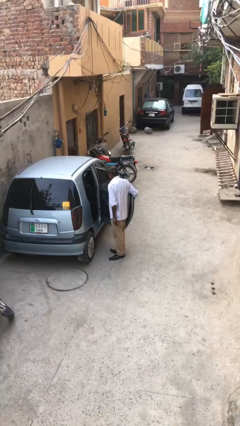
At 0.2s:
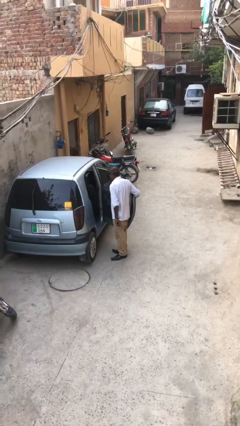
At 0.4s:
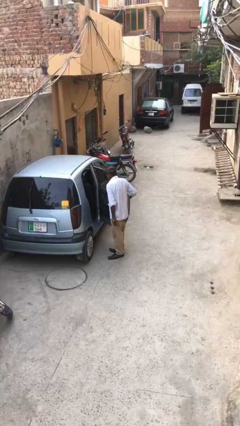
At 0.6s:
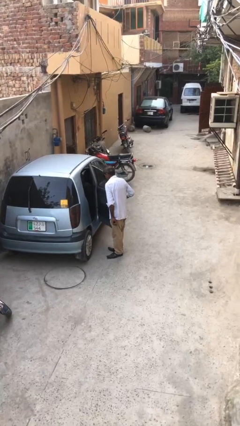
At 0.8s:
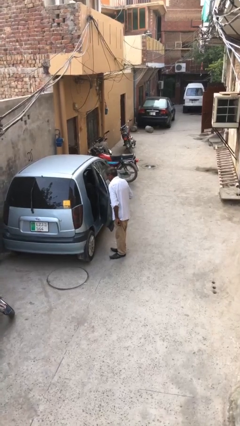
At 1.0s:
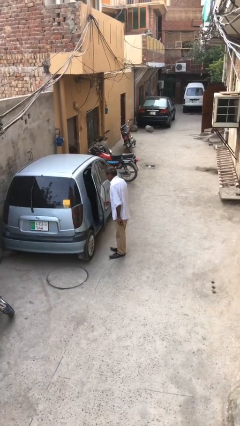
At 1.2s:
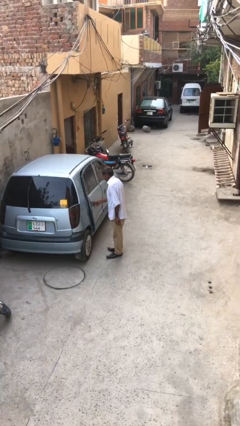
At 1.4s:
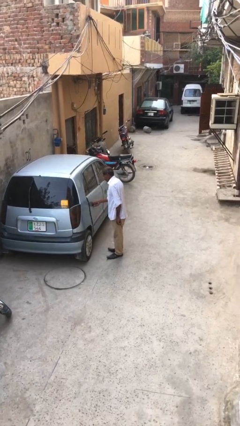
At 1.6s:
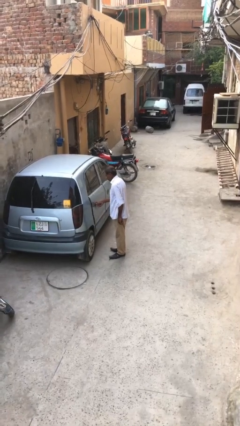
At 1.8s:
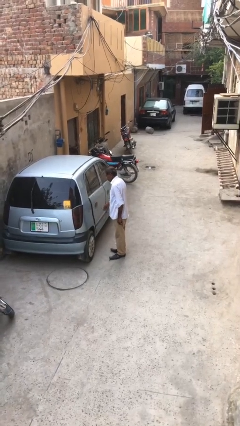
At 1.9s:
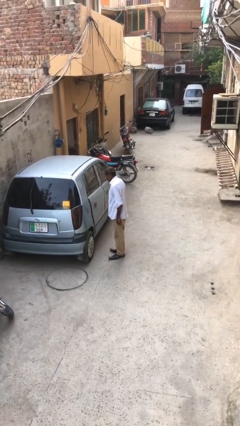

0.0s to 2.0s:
person closes car door

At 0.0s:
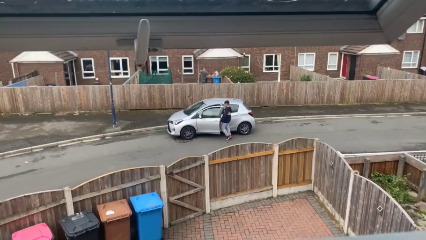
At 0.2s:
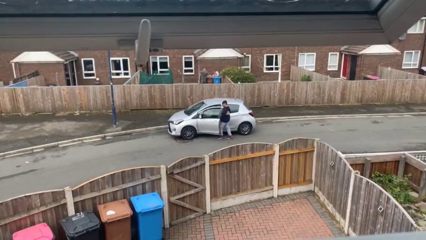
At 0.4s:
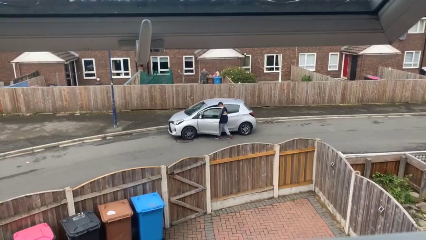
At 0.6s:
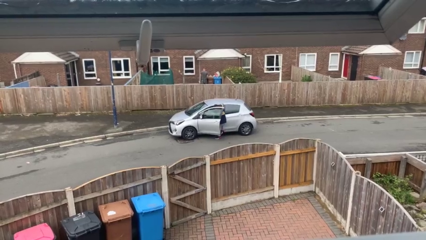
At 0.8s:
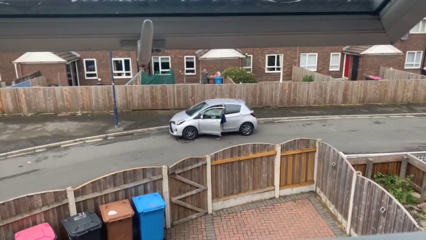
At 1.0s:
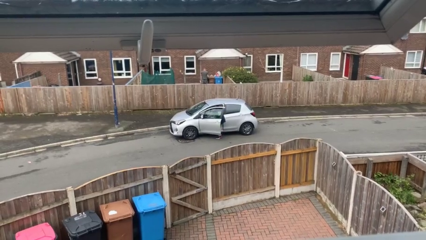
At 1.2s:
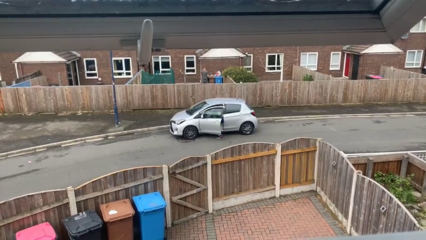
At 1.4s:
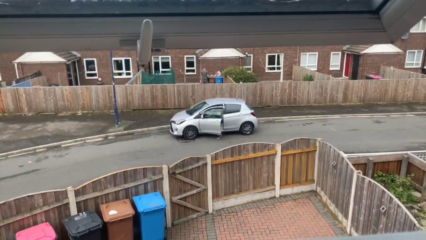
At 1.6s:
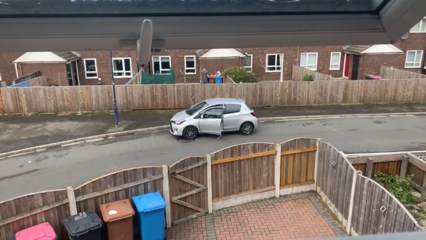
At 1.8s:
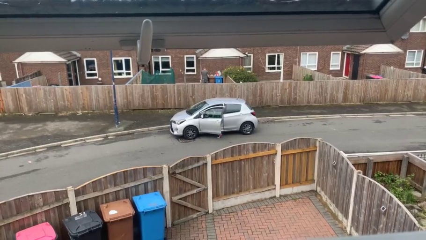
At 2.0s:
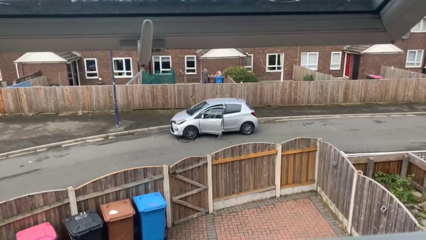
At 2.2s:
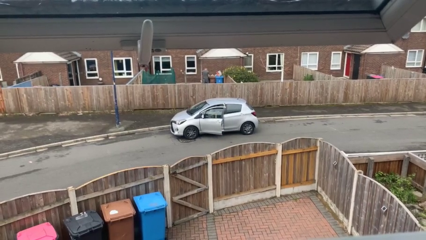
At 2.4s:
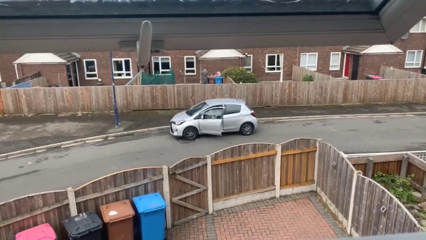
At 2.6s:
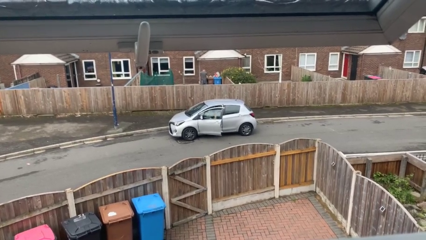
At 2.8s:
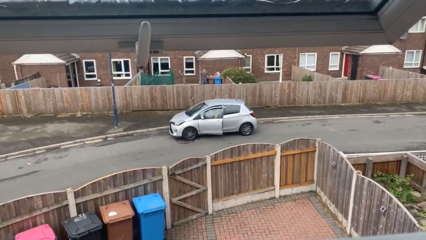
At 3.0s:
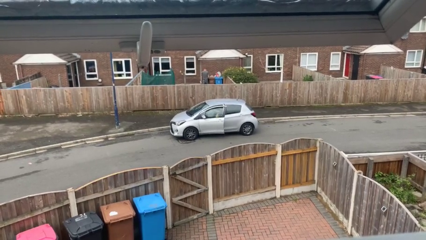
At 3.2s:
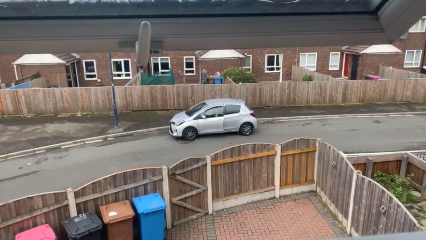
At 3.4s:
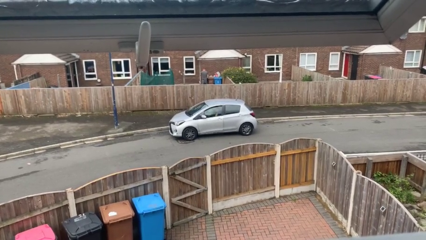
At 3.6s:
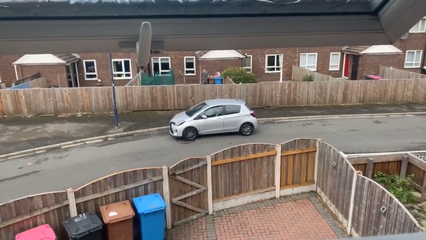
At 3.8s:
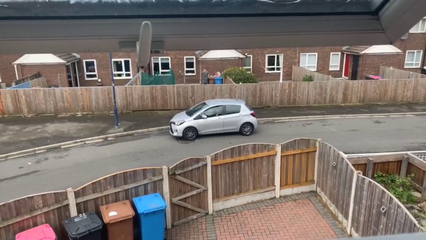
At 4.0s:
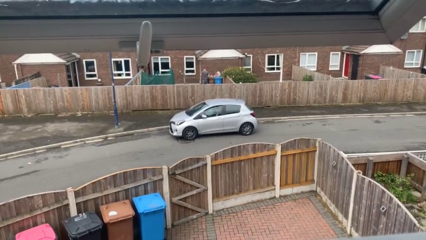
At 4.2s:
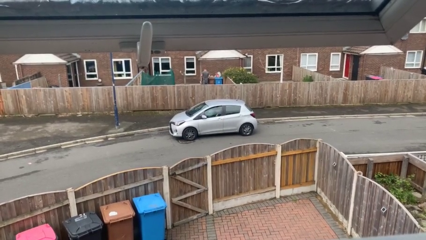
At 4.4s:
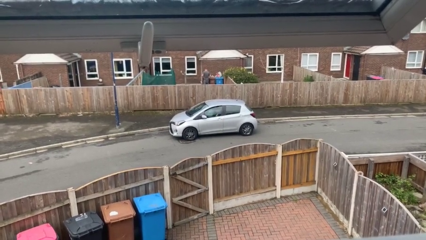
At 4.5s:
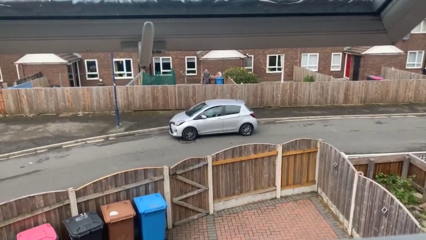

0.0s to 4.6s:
car picks up person

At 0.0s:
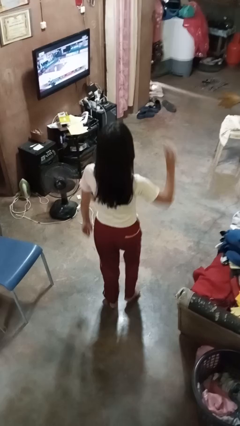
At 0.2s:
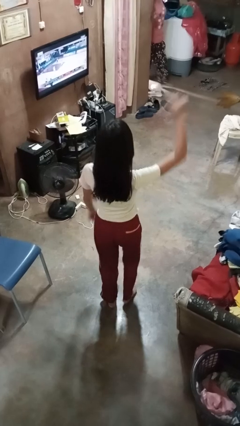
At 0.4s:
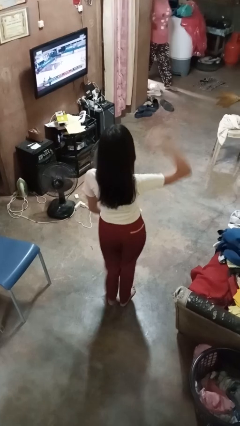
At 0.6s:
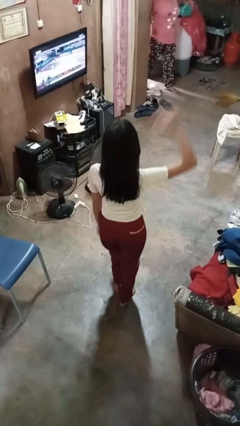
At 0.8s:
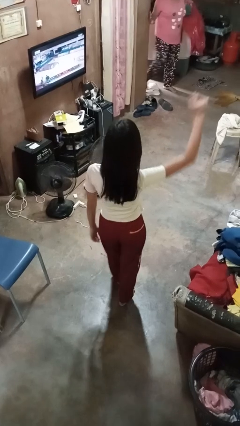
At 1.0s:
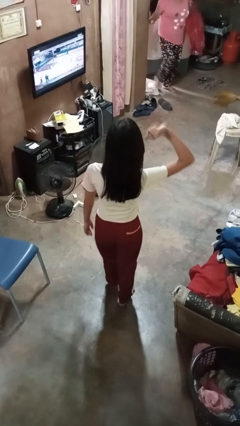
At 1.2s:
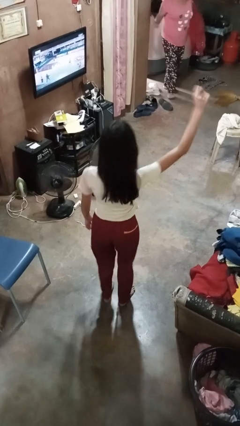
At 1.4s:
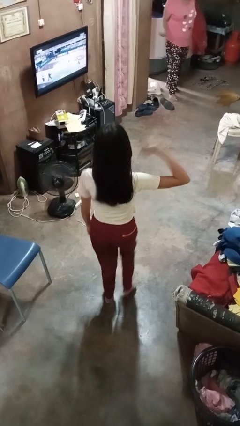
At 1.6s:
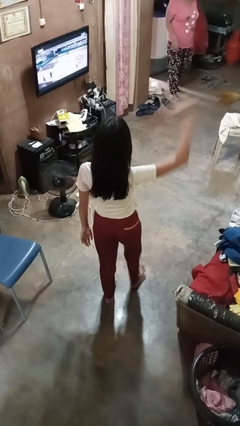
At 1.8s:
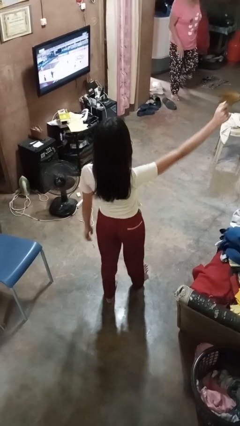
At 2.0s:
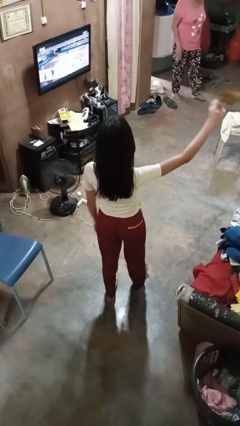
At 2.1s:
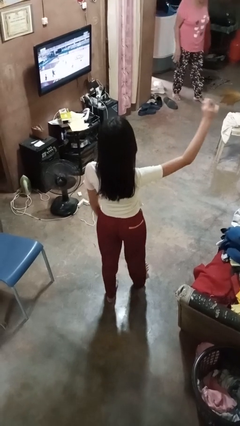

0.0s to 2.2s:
person dances in place

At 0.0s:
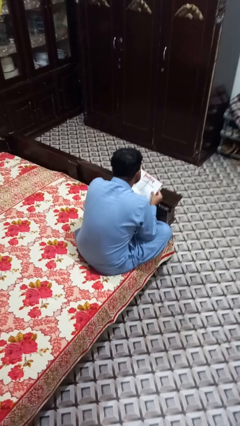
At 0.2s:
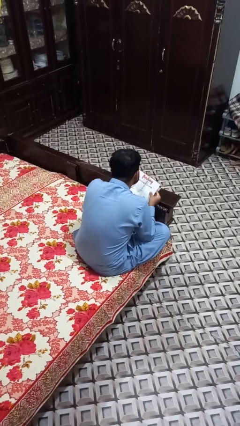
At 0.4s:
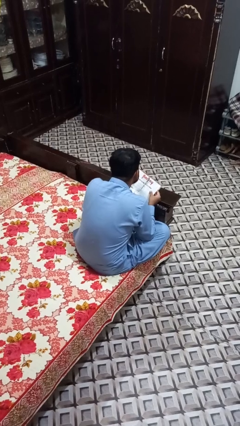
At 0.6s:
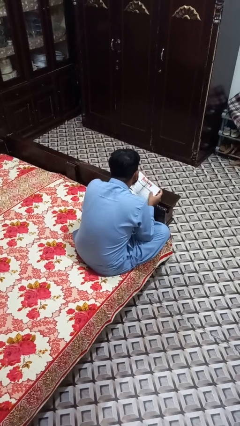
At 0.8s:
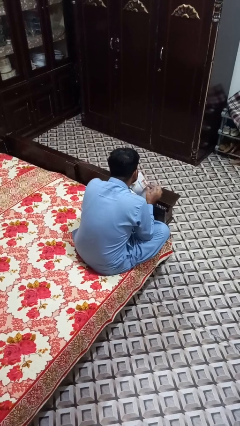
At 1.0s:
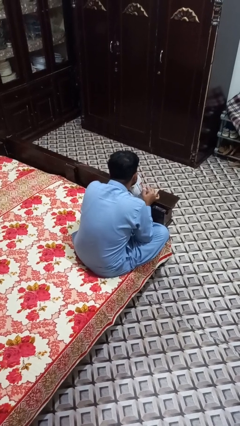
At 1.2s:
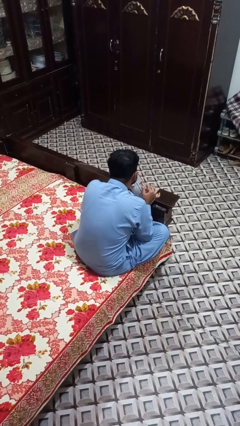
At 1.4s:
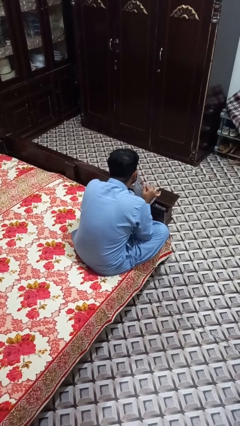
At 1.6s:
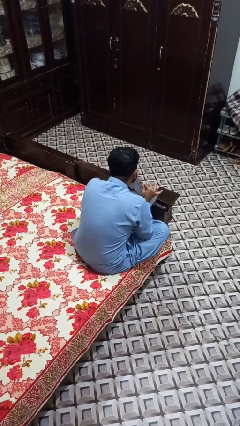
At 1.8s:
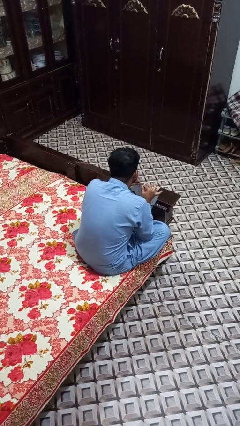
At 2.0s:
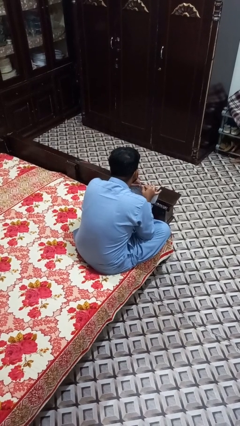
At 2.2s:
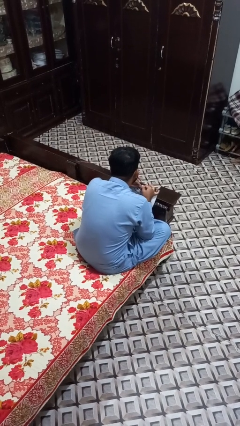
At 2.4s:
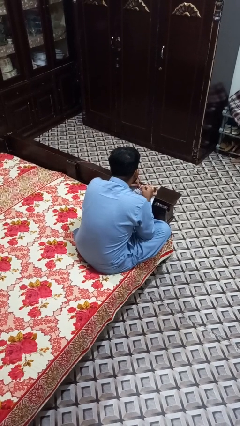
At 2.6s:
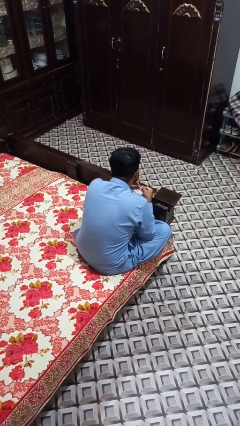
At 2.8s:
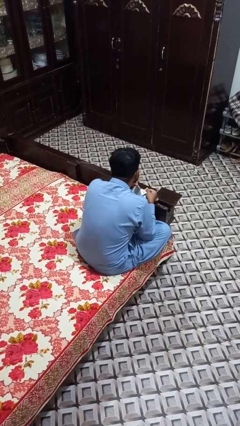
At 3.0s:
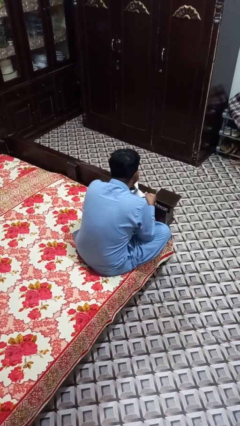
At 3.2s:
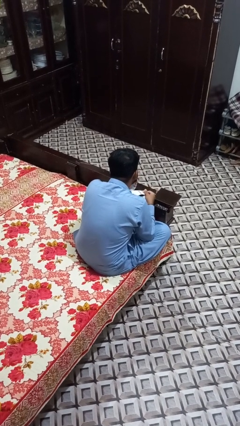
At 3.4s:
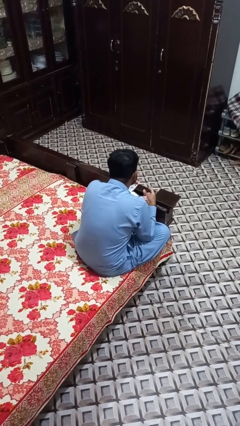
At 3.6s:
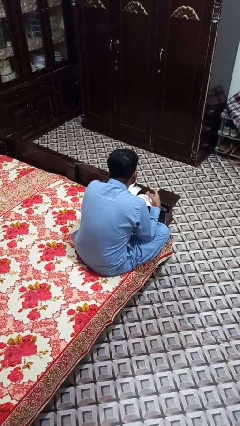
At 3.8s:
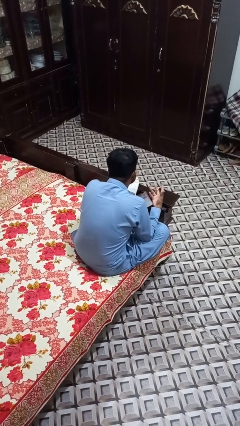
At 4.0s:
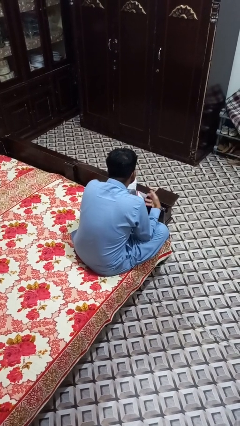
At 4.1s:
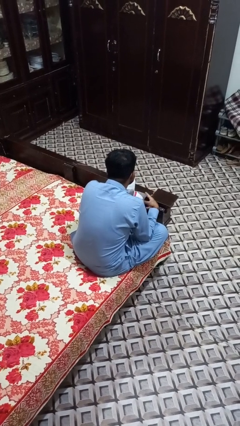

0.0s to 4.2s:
person tears paper

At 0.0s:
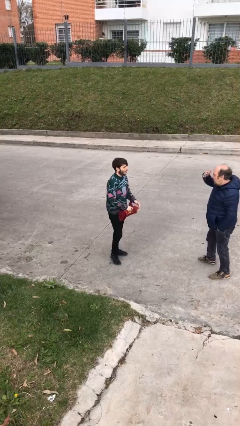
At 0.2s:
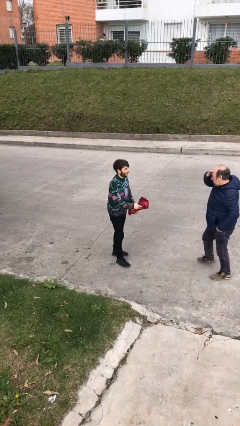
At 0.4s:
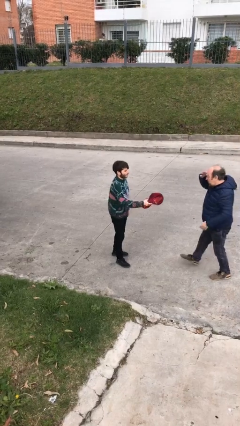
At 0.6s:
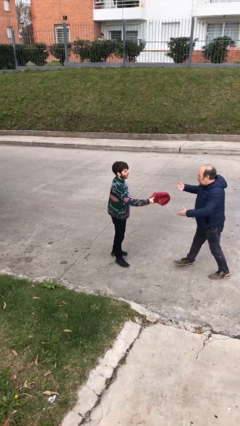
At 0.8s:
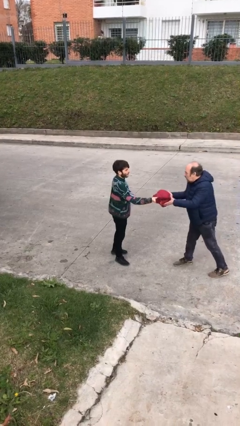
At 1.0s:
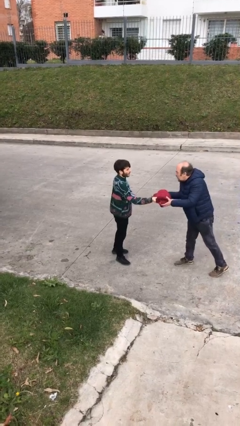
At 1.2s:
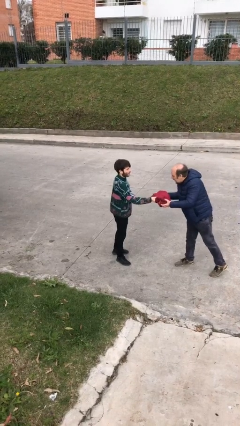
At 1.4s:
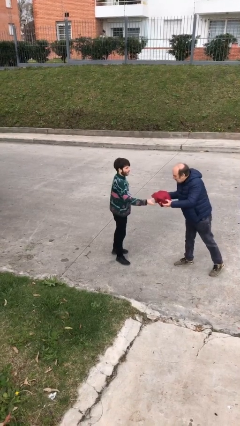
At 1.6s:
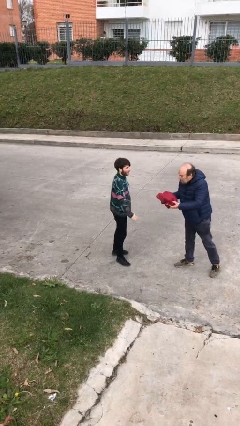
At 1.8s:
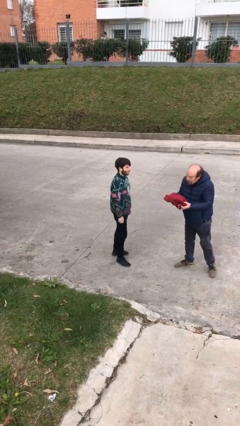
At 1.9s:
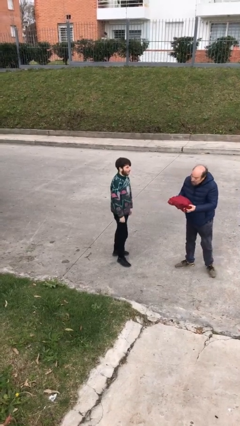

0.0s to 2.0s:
person transfers object to person

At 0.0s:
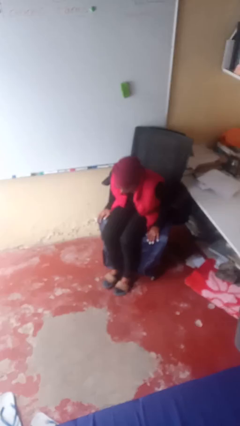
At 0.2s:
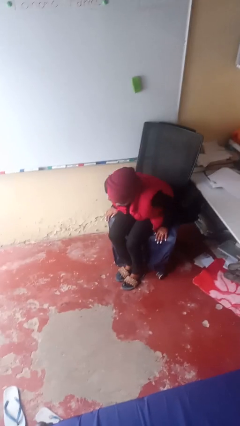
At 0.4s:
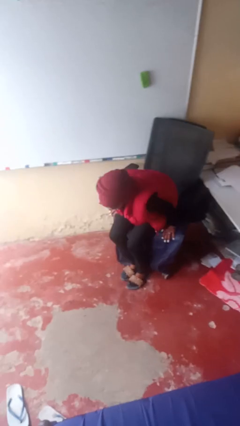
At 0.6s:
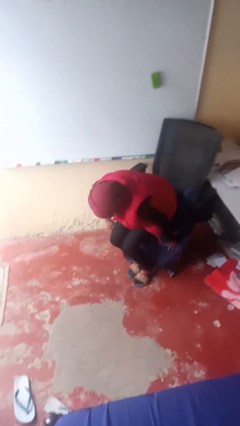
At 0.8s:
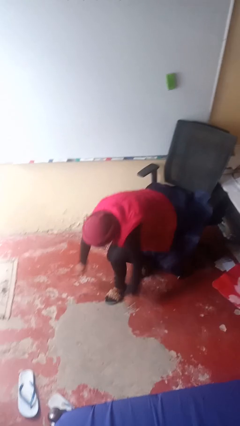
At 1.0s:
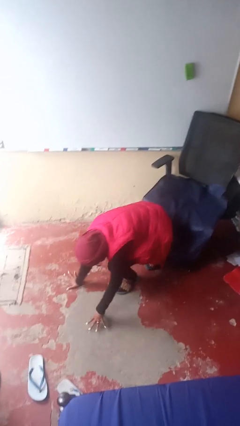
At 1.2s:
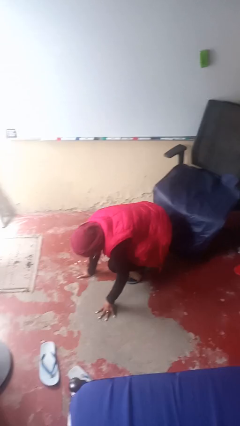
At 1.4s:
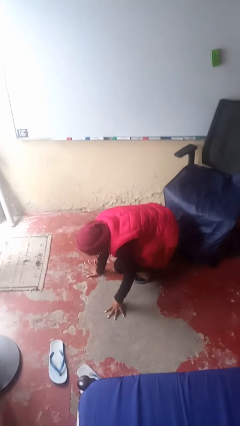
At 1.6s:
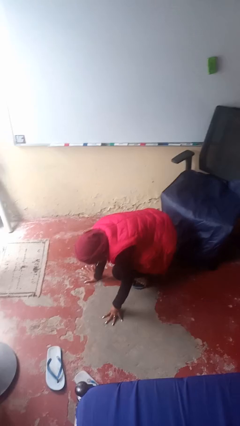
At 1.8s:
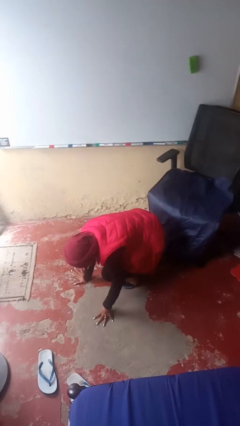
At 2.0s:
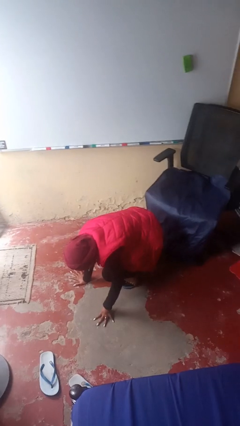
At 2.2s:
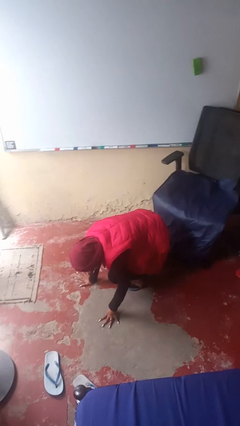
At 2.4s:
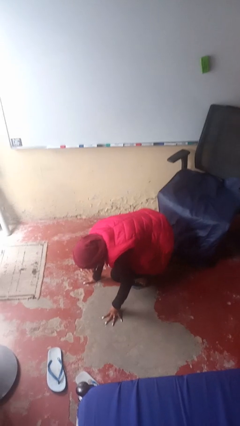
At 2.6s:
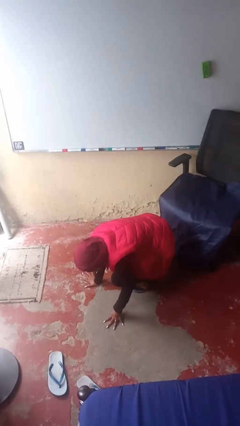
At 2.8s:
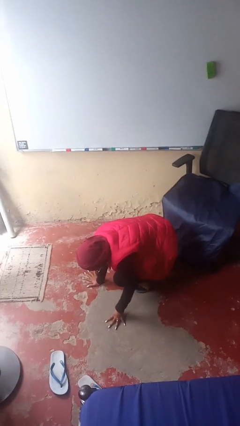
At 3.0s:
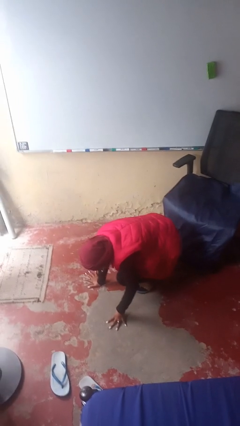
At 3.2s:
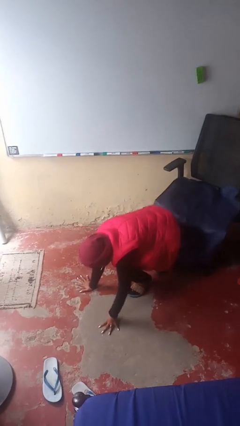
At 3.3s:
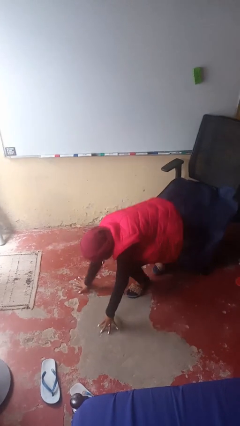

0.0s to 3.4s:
person falls from chair
